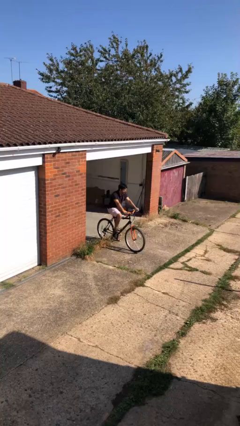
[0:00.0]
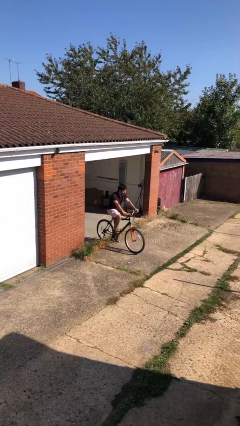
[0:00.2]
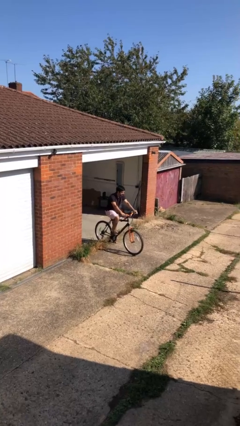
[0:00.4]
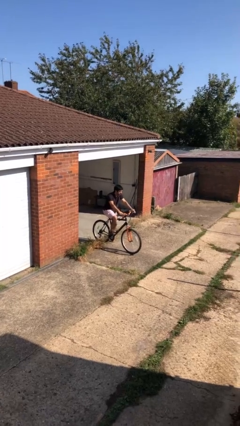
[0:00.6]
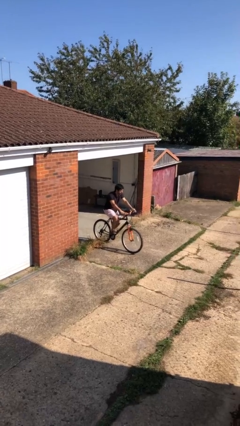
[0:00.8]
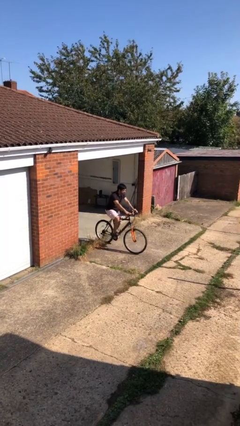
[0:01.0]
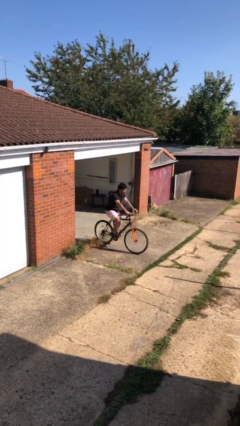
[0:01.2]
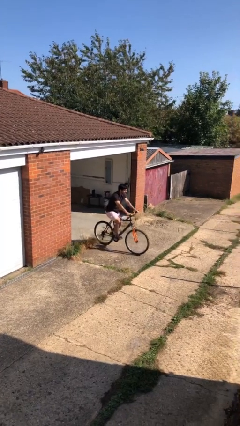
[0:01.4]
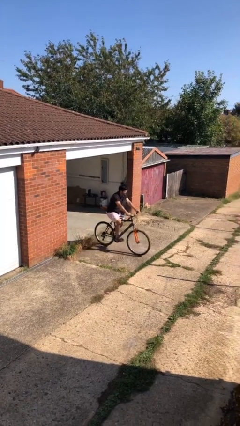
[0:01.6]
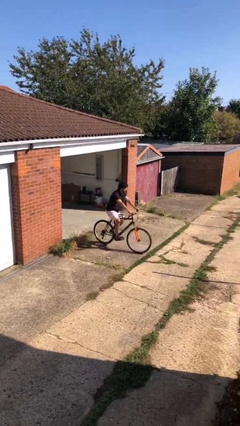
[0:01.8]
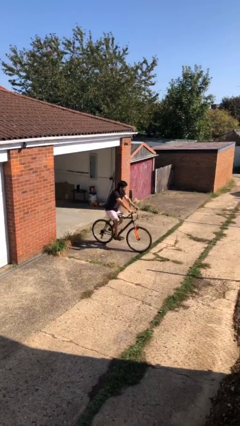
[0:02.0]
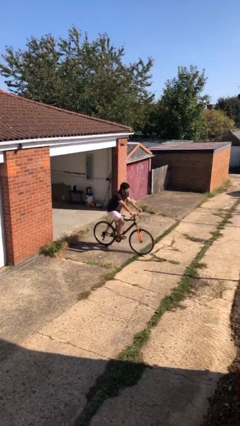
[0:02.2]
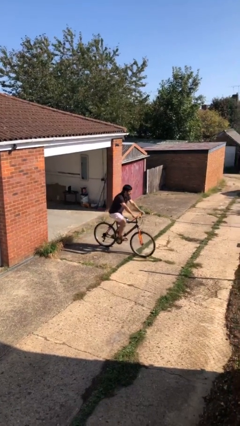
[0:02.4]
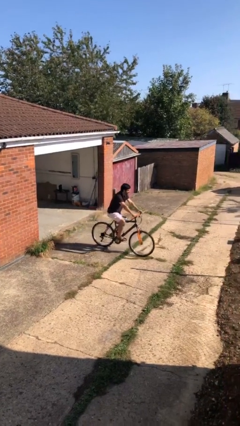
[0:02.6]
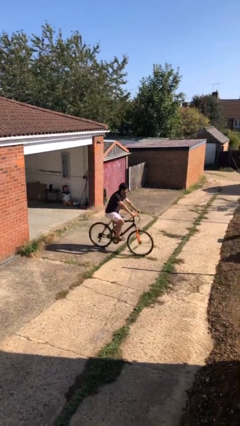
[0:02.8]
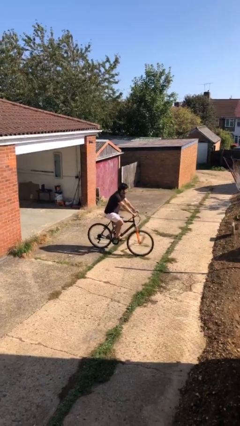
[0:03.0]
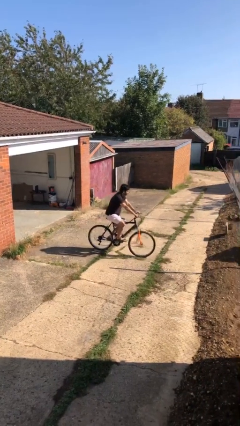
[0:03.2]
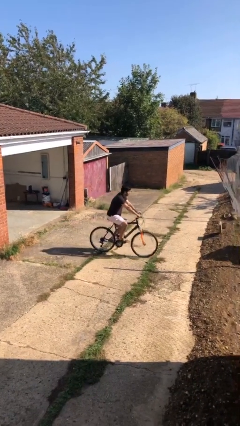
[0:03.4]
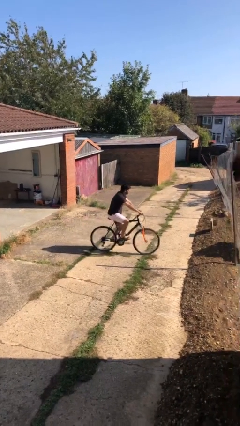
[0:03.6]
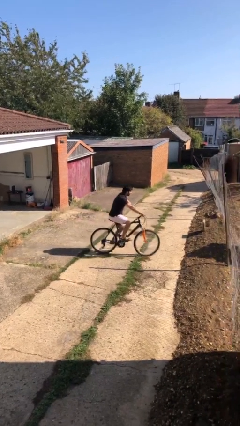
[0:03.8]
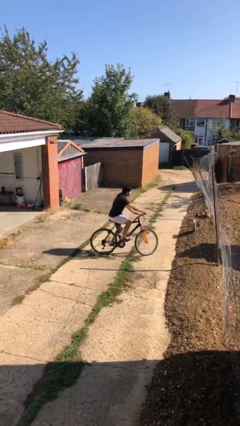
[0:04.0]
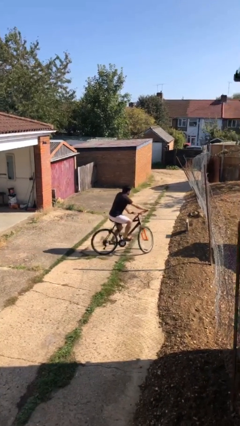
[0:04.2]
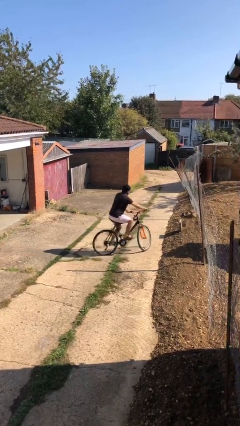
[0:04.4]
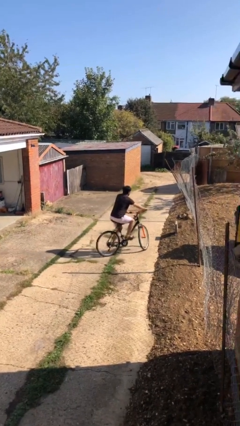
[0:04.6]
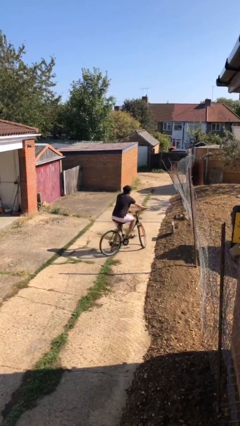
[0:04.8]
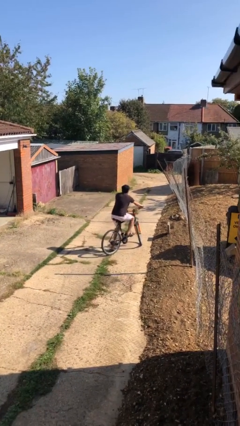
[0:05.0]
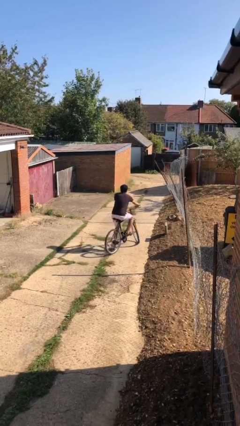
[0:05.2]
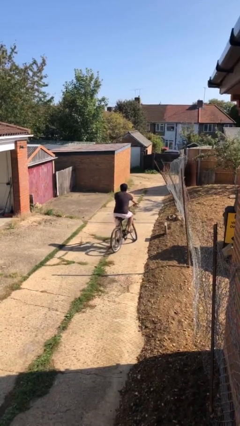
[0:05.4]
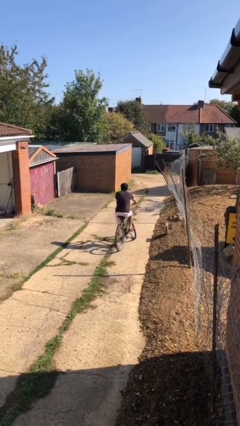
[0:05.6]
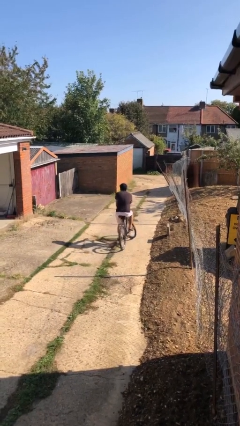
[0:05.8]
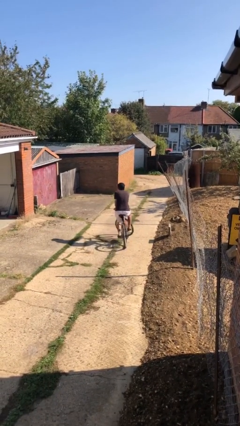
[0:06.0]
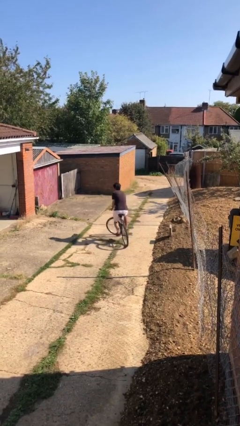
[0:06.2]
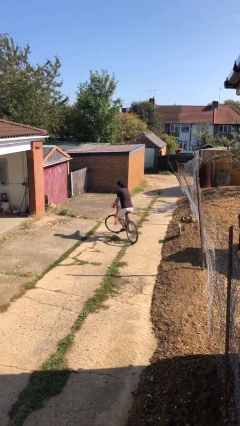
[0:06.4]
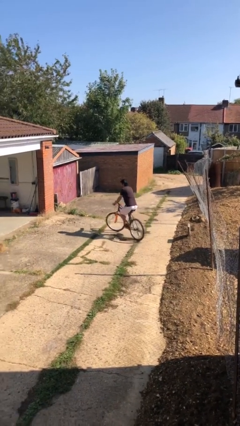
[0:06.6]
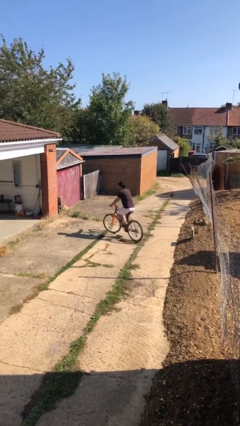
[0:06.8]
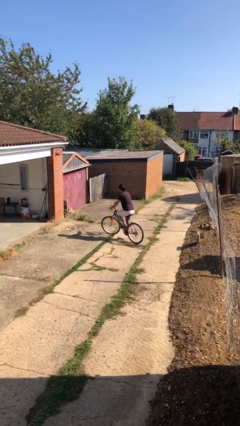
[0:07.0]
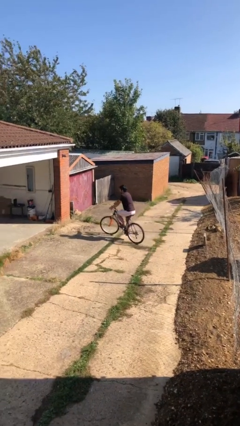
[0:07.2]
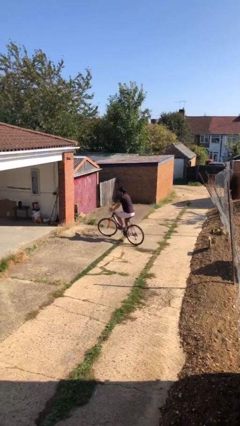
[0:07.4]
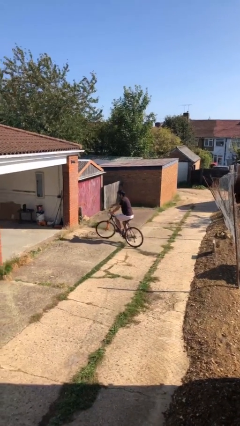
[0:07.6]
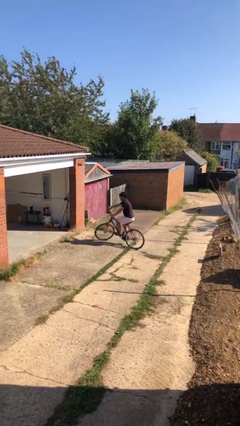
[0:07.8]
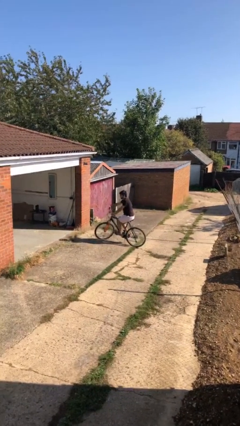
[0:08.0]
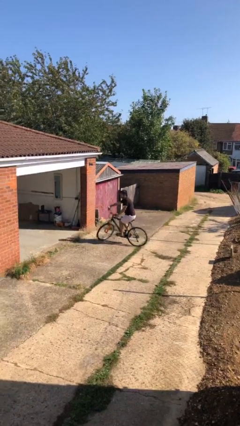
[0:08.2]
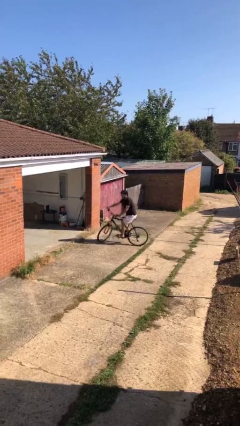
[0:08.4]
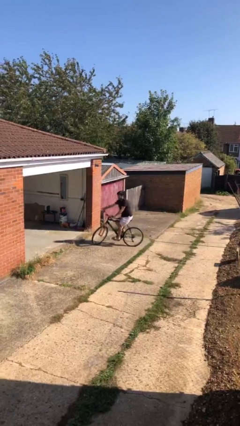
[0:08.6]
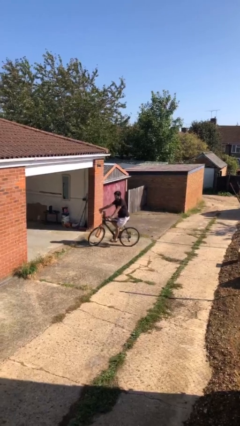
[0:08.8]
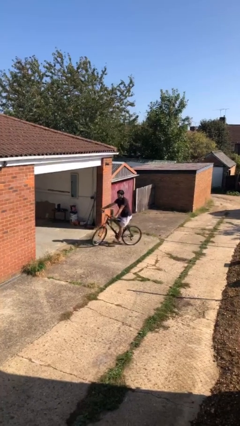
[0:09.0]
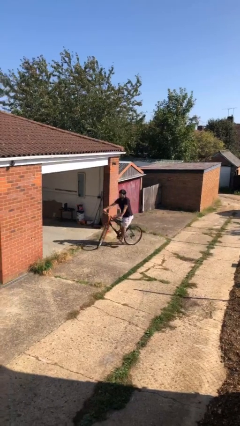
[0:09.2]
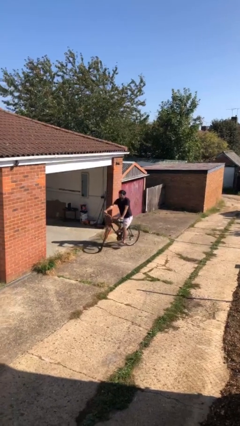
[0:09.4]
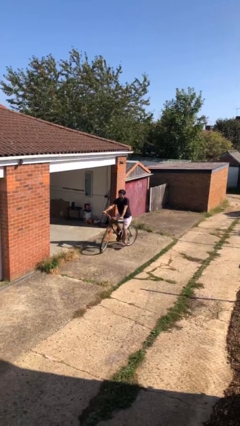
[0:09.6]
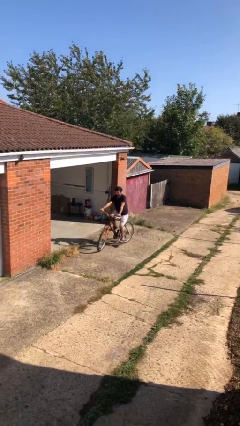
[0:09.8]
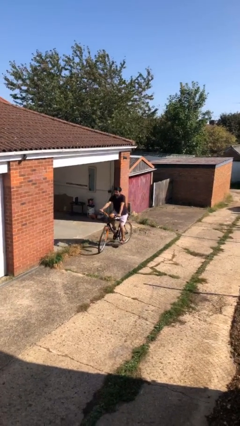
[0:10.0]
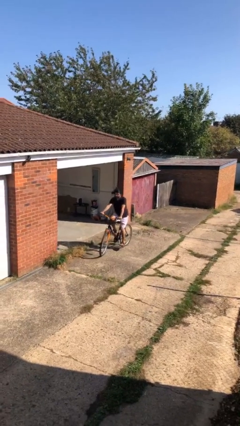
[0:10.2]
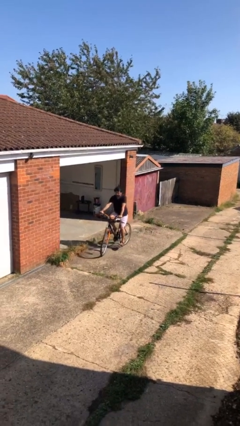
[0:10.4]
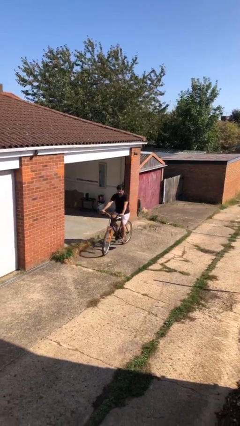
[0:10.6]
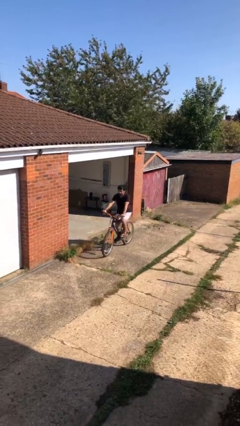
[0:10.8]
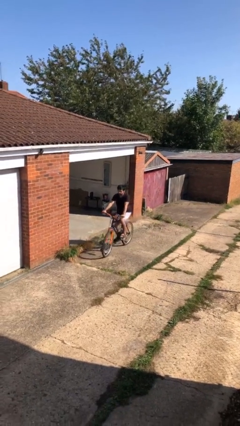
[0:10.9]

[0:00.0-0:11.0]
person rides bicycle

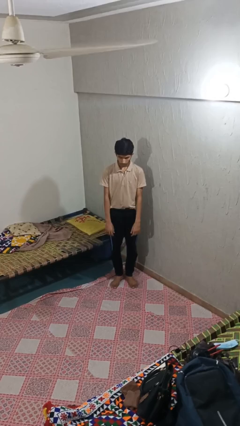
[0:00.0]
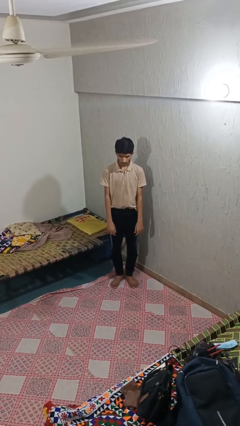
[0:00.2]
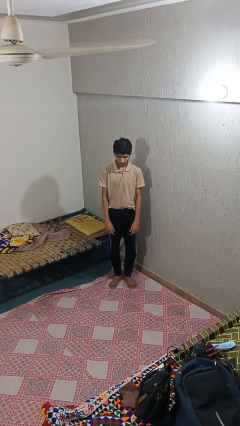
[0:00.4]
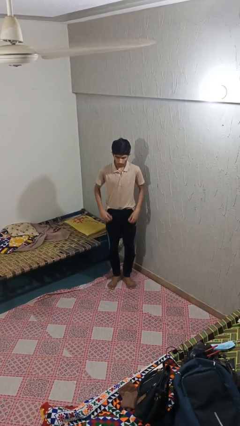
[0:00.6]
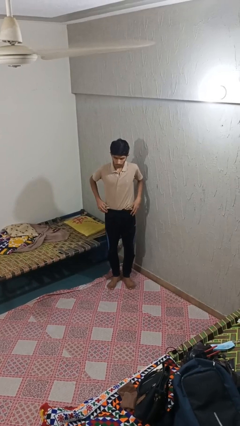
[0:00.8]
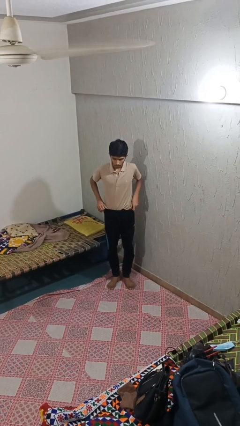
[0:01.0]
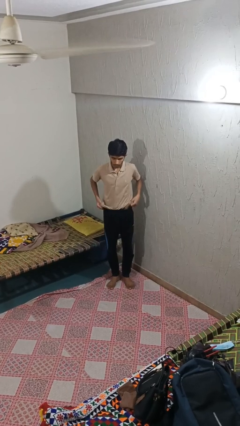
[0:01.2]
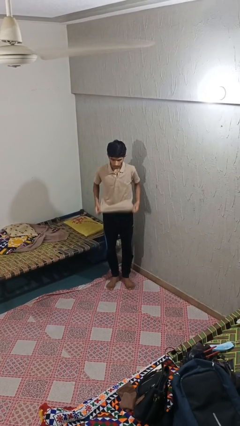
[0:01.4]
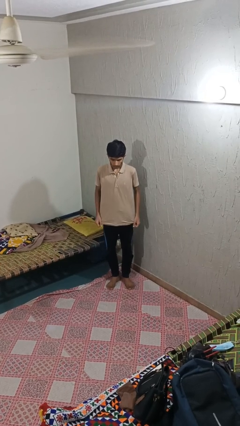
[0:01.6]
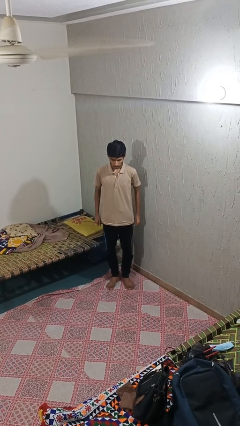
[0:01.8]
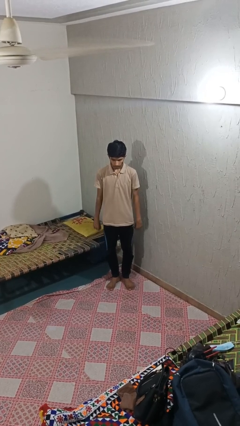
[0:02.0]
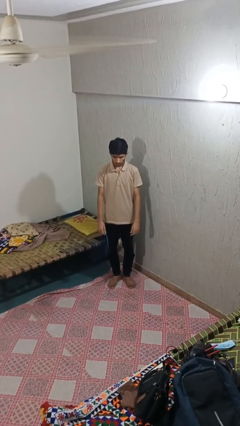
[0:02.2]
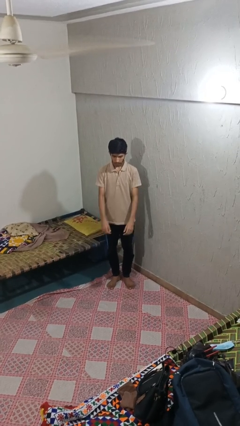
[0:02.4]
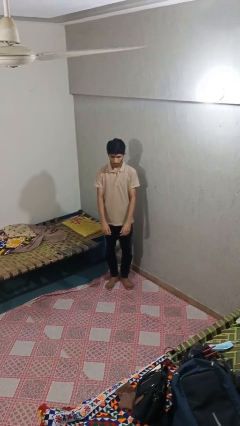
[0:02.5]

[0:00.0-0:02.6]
person untucks shirt

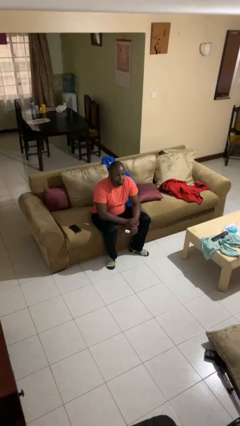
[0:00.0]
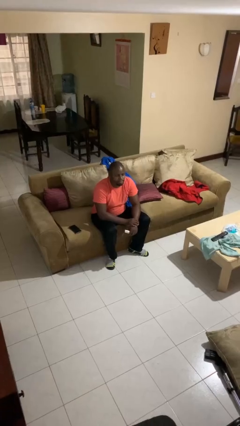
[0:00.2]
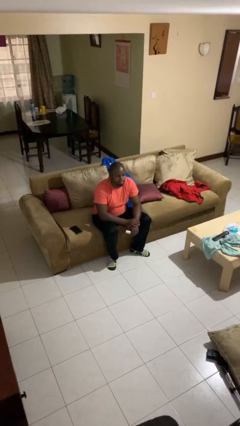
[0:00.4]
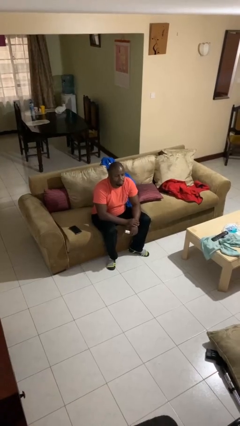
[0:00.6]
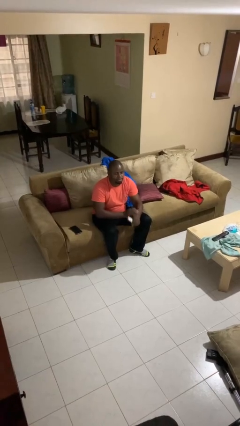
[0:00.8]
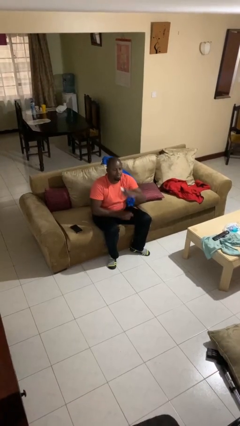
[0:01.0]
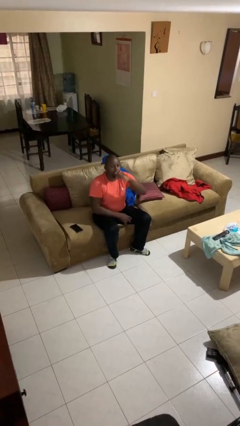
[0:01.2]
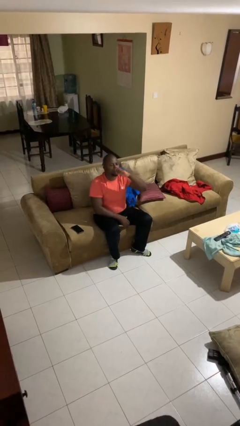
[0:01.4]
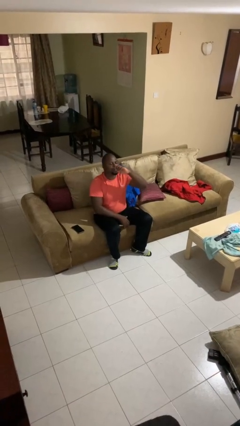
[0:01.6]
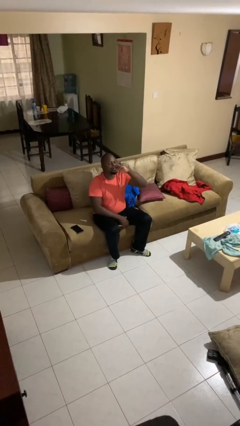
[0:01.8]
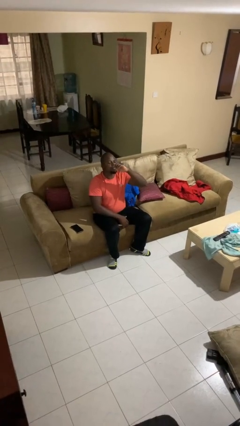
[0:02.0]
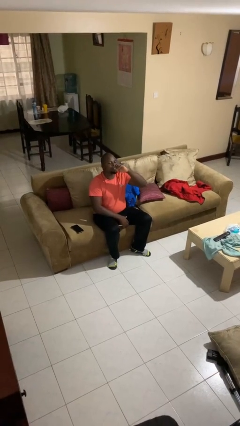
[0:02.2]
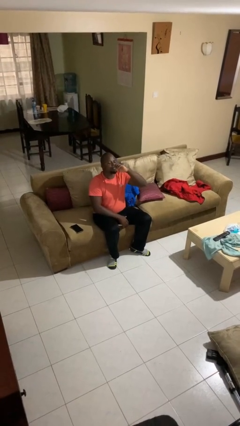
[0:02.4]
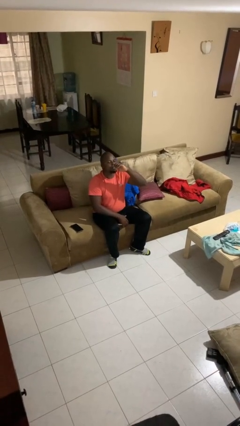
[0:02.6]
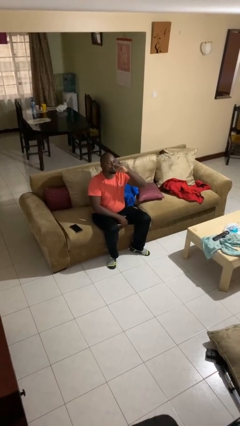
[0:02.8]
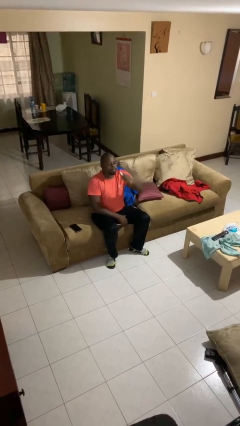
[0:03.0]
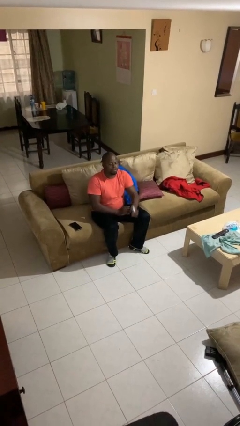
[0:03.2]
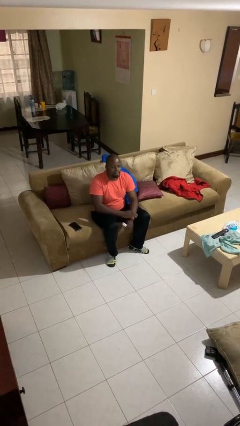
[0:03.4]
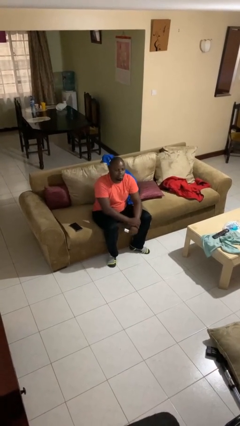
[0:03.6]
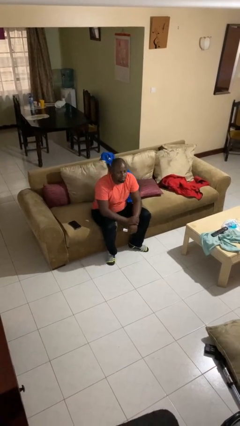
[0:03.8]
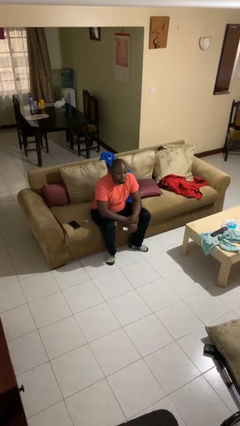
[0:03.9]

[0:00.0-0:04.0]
person vapes

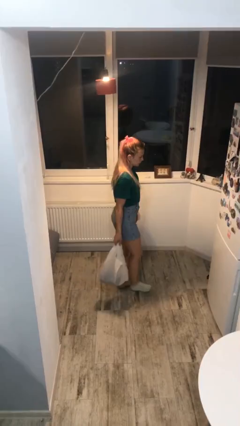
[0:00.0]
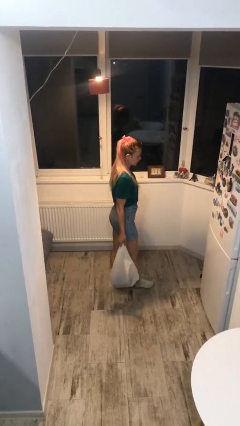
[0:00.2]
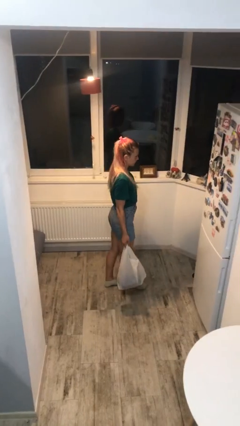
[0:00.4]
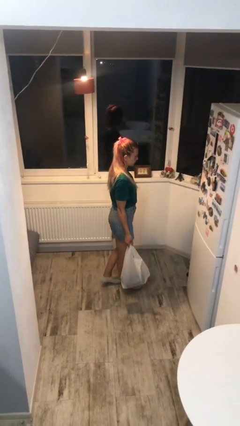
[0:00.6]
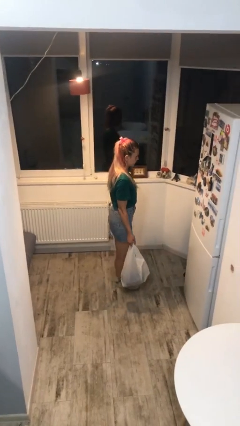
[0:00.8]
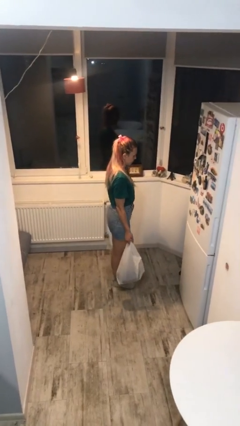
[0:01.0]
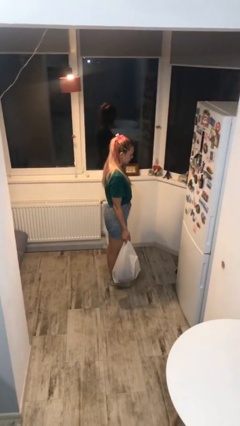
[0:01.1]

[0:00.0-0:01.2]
person carries groceries
